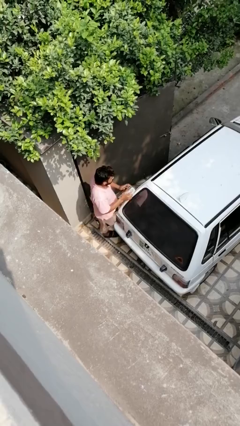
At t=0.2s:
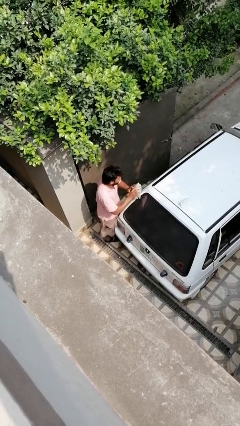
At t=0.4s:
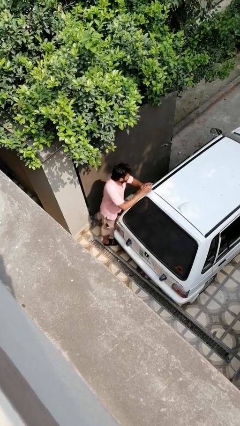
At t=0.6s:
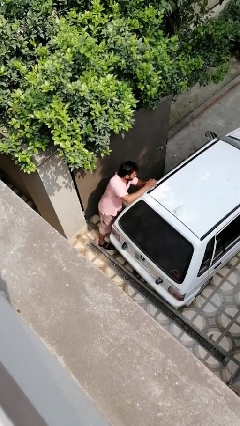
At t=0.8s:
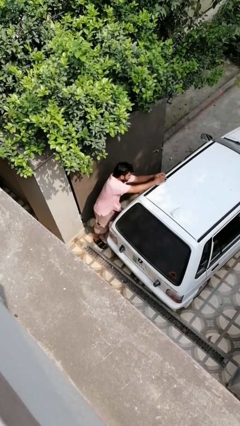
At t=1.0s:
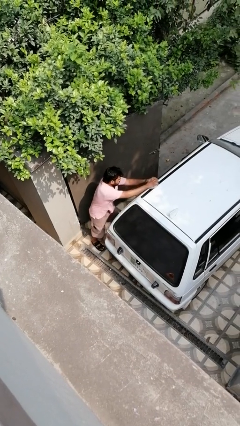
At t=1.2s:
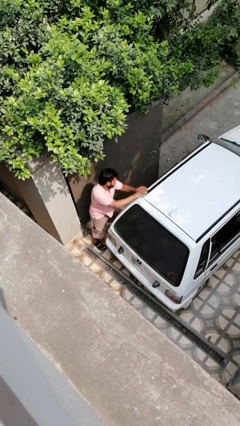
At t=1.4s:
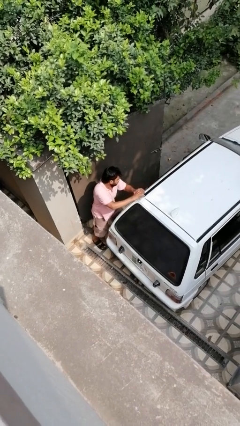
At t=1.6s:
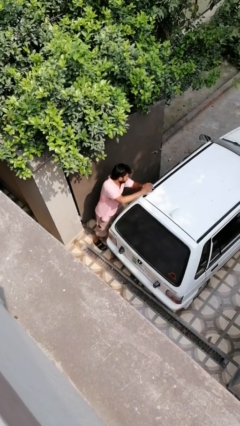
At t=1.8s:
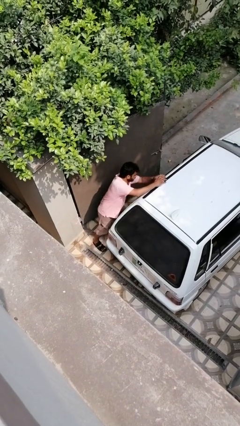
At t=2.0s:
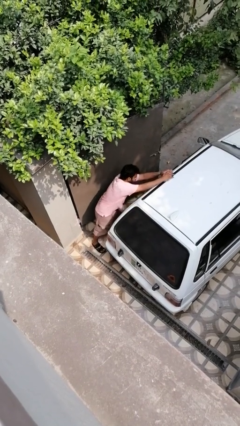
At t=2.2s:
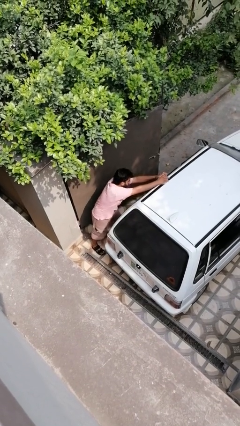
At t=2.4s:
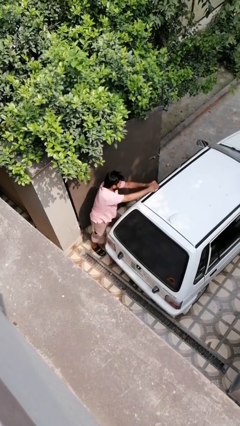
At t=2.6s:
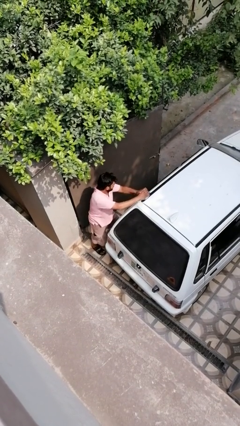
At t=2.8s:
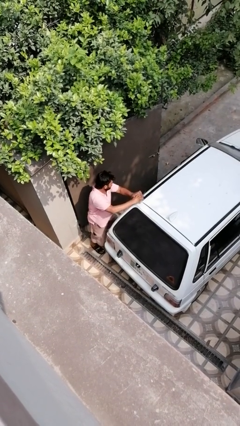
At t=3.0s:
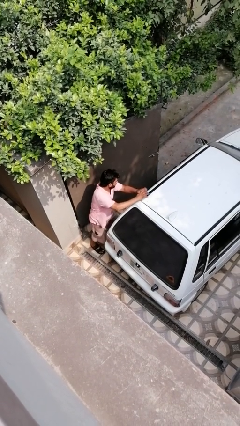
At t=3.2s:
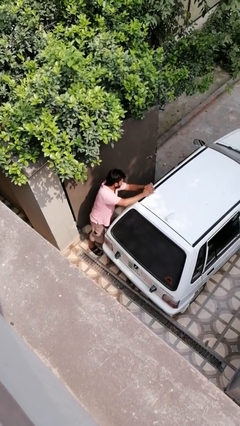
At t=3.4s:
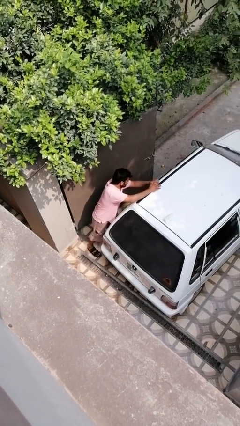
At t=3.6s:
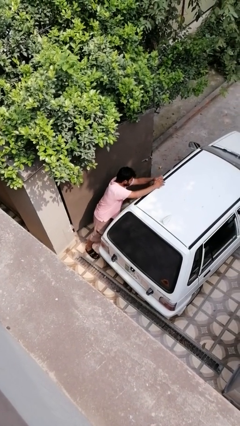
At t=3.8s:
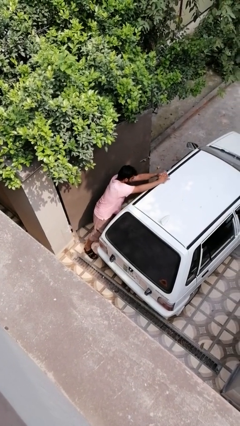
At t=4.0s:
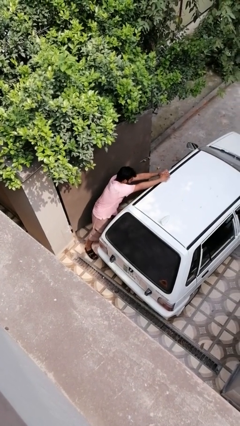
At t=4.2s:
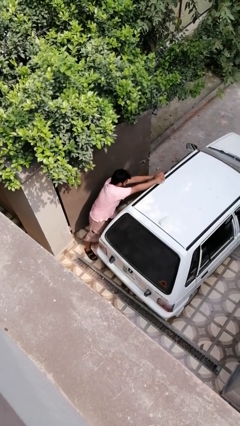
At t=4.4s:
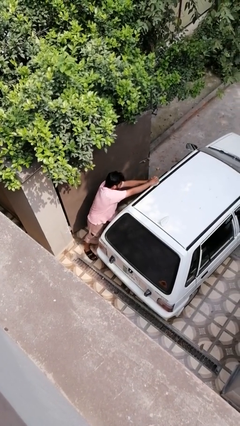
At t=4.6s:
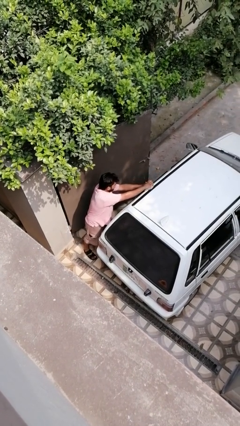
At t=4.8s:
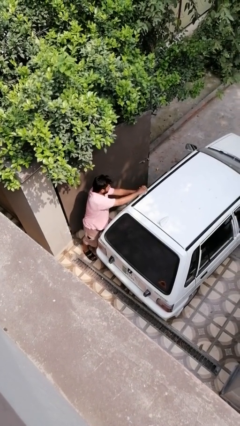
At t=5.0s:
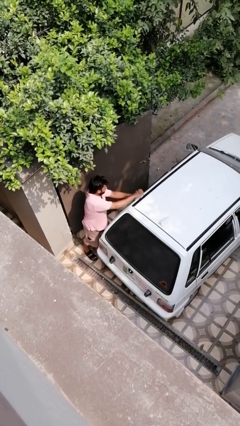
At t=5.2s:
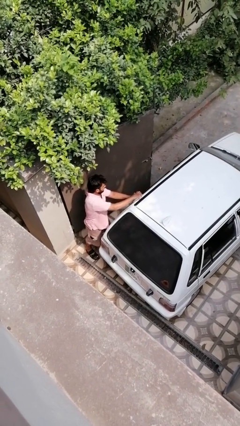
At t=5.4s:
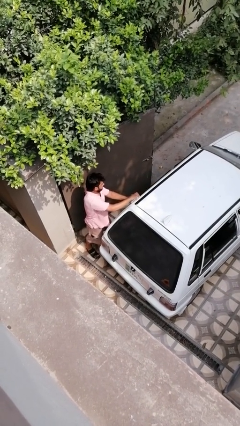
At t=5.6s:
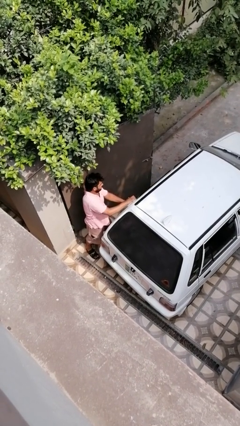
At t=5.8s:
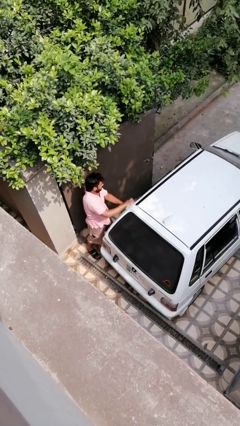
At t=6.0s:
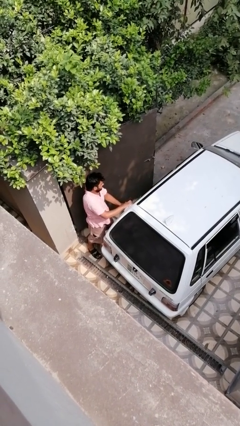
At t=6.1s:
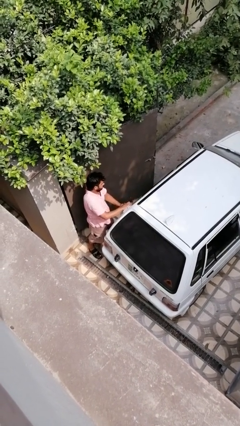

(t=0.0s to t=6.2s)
person polishes car with rag

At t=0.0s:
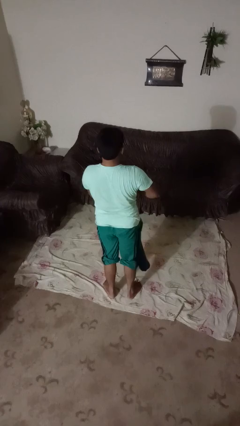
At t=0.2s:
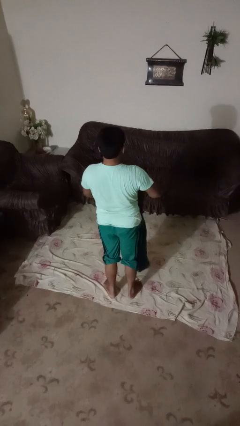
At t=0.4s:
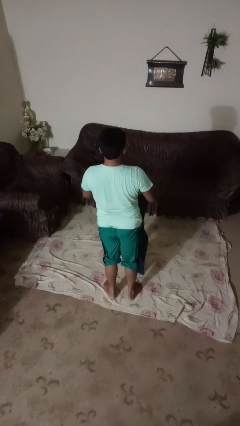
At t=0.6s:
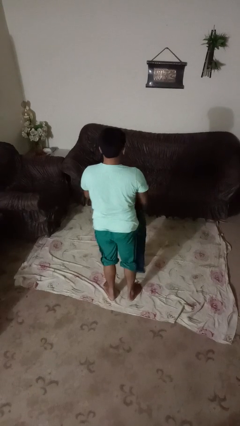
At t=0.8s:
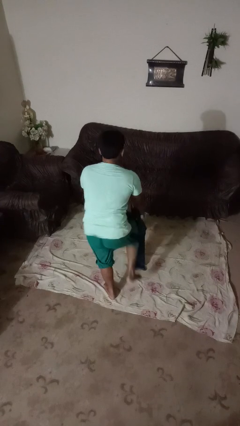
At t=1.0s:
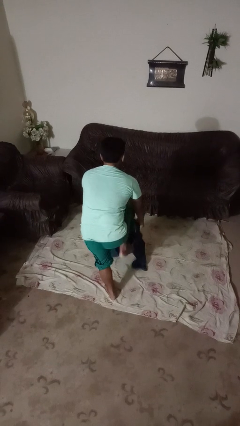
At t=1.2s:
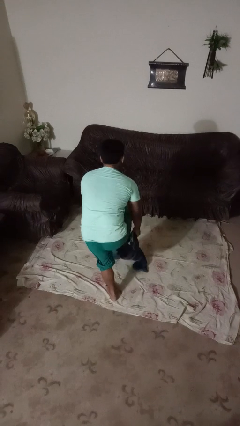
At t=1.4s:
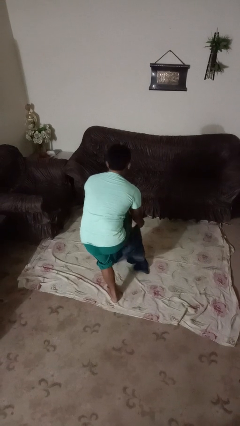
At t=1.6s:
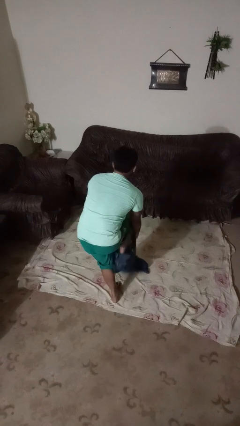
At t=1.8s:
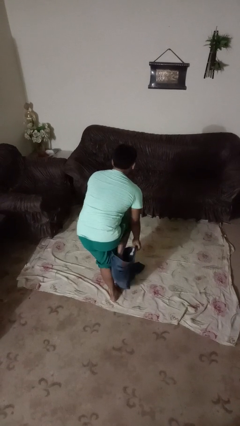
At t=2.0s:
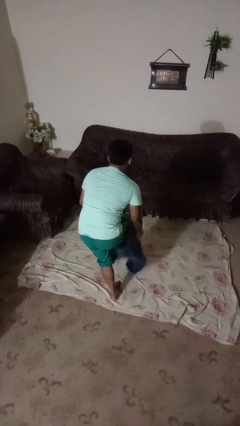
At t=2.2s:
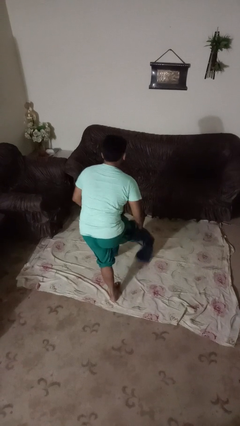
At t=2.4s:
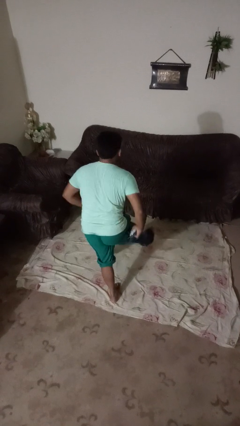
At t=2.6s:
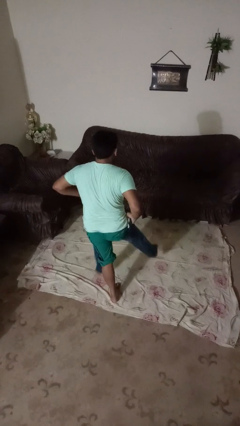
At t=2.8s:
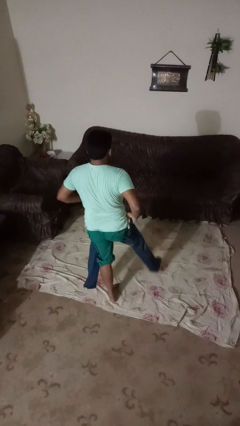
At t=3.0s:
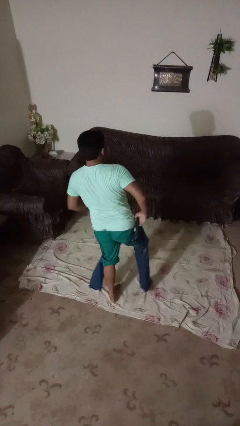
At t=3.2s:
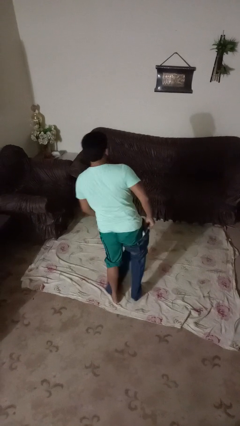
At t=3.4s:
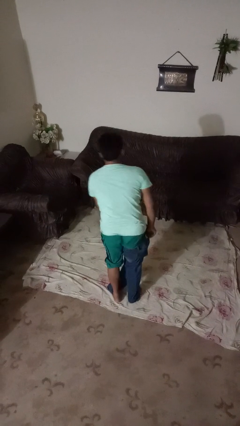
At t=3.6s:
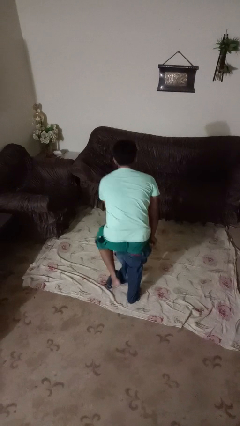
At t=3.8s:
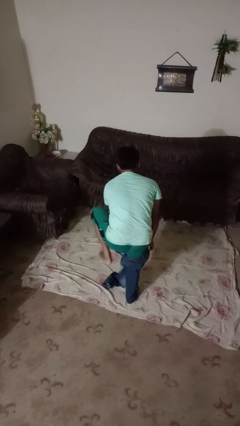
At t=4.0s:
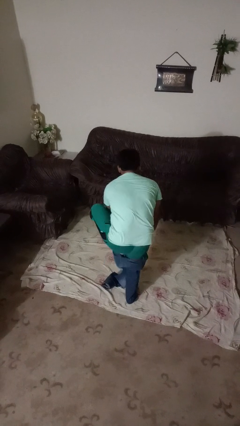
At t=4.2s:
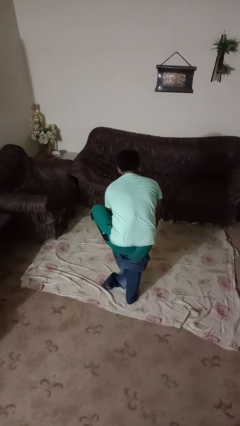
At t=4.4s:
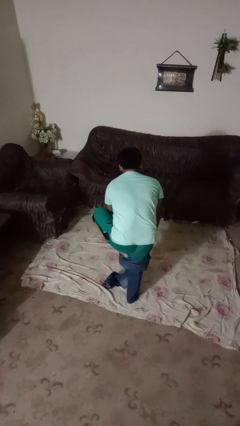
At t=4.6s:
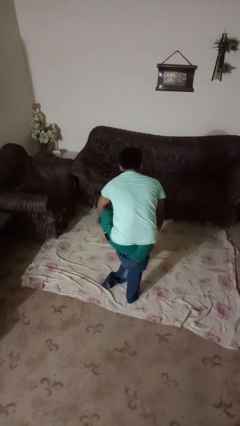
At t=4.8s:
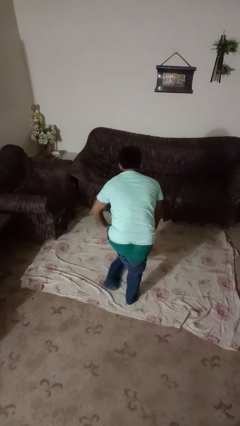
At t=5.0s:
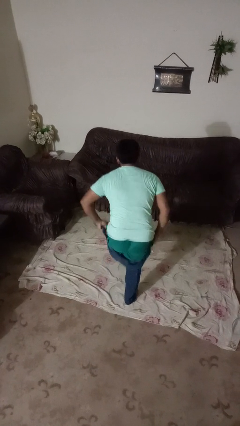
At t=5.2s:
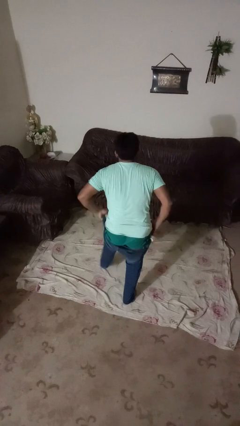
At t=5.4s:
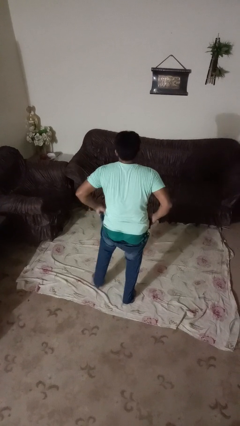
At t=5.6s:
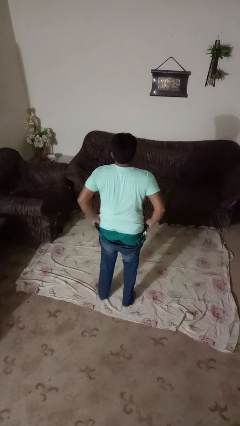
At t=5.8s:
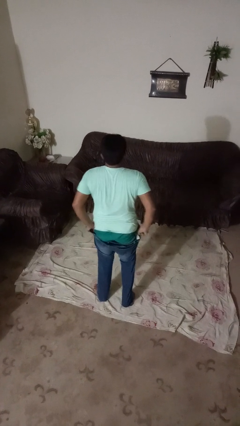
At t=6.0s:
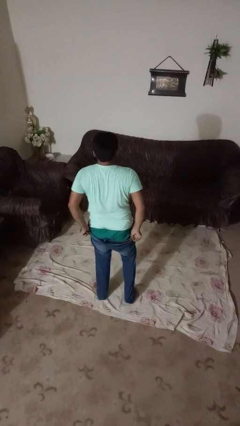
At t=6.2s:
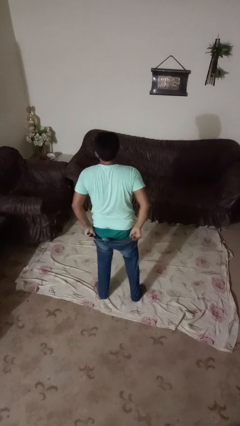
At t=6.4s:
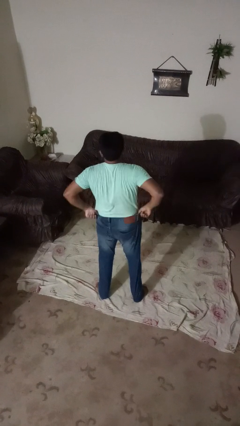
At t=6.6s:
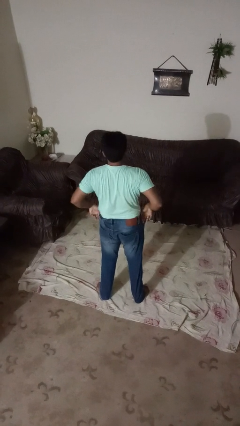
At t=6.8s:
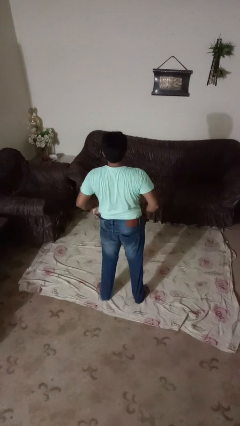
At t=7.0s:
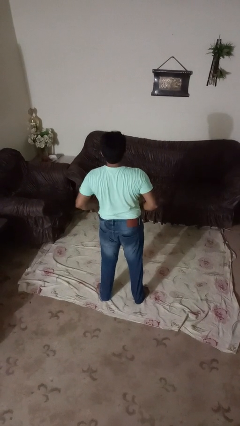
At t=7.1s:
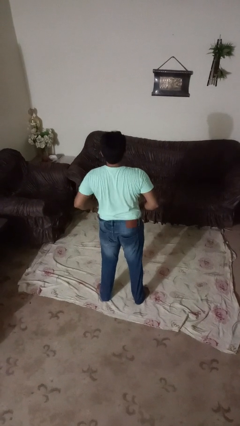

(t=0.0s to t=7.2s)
person puts on pants

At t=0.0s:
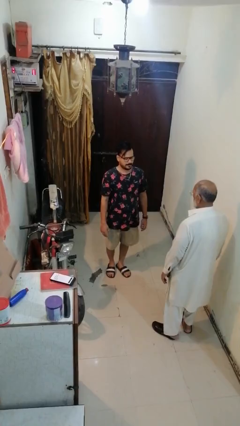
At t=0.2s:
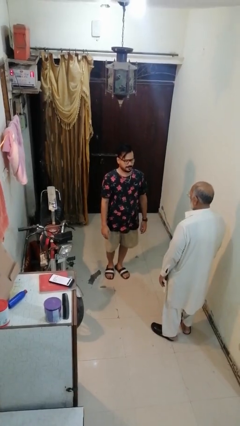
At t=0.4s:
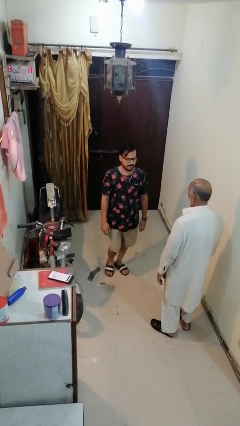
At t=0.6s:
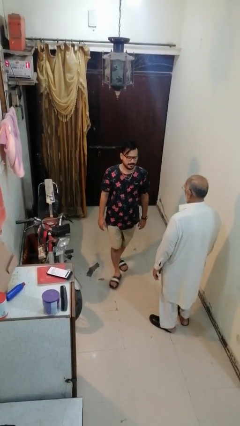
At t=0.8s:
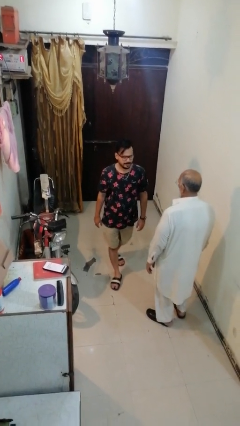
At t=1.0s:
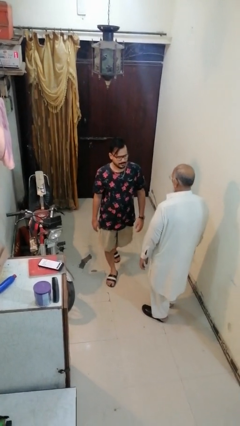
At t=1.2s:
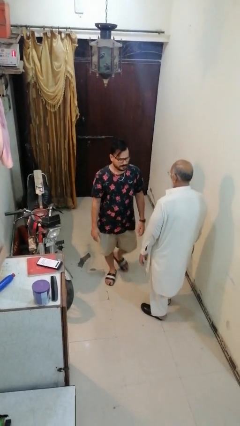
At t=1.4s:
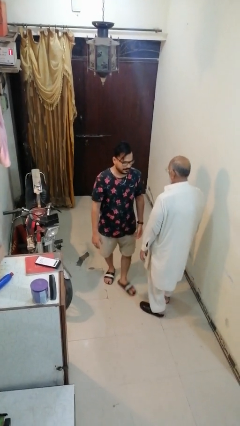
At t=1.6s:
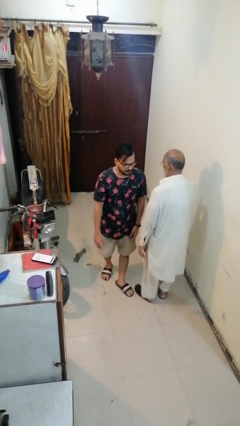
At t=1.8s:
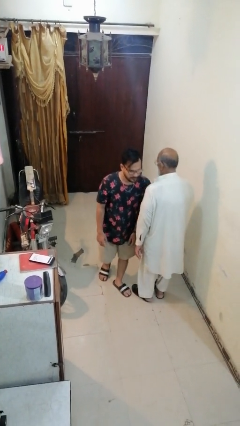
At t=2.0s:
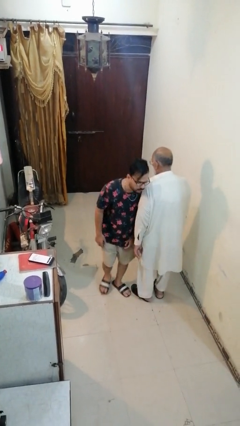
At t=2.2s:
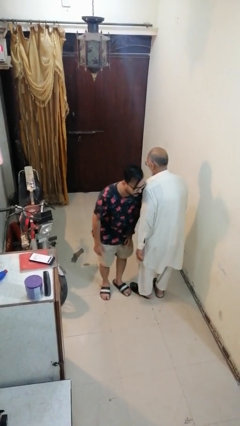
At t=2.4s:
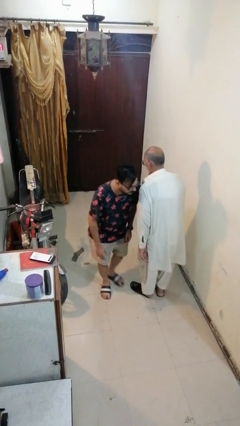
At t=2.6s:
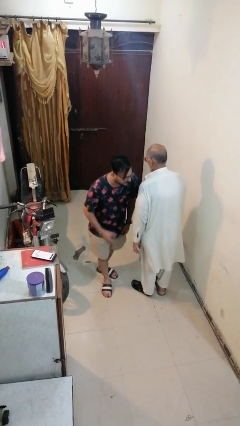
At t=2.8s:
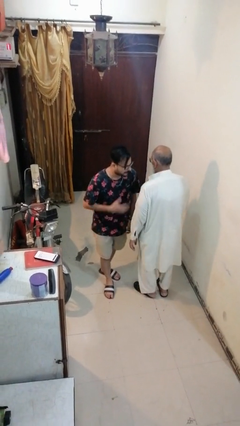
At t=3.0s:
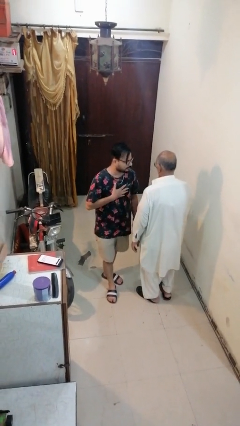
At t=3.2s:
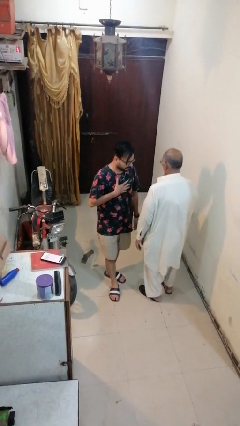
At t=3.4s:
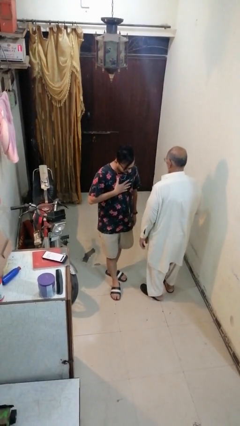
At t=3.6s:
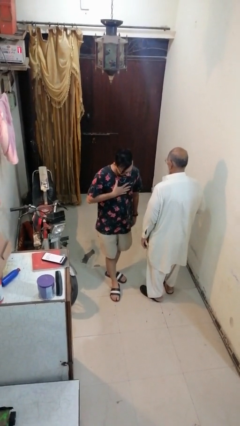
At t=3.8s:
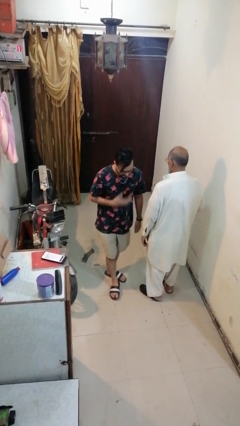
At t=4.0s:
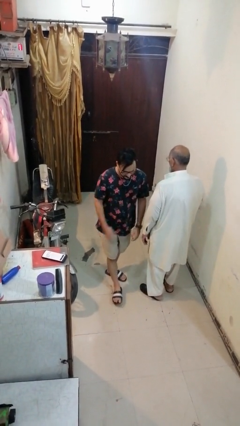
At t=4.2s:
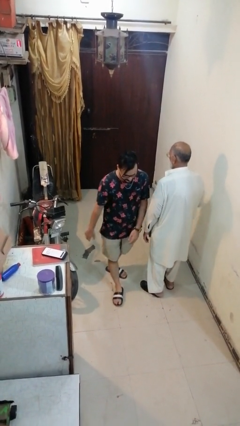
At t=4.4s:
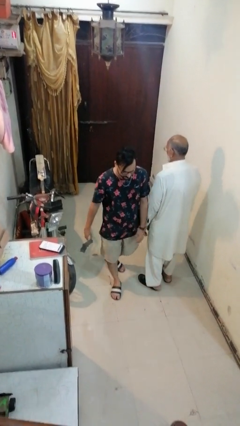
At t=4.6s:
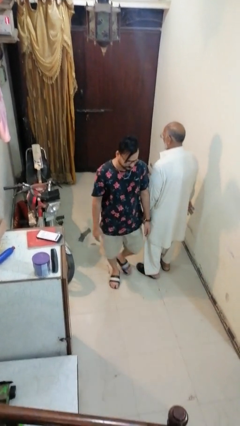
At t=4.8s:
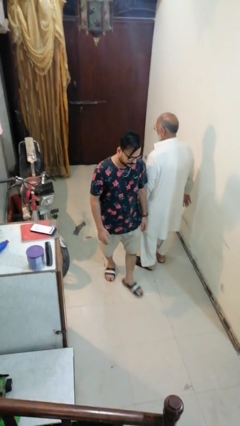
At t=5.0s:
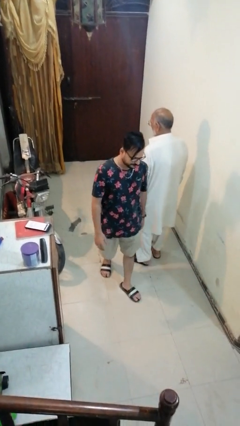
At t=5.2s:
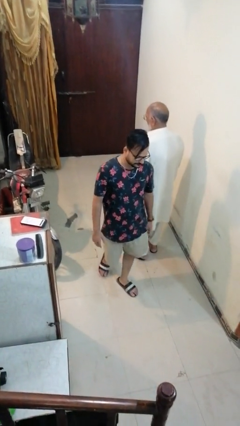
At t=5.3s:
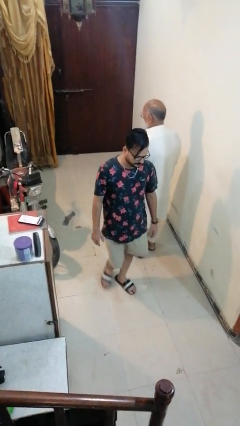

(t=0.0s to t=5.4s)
person bumps into person
